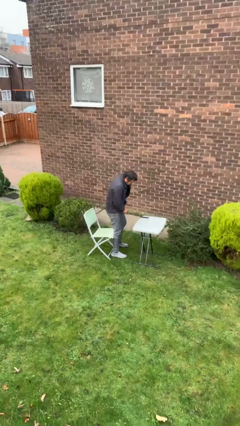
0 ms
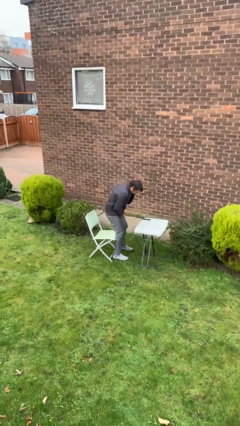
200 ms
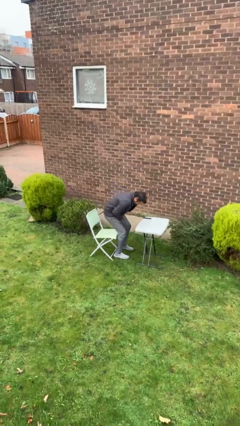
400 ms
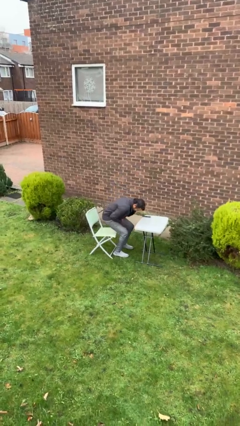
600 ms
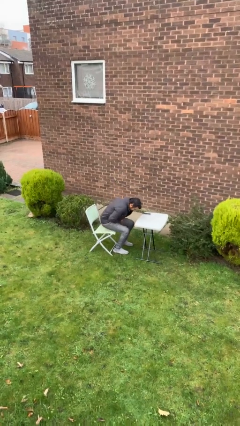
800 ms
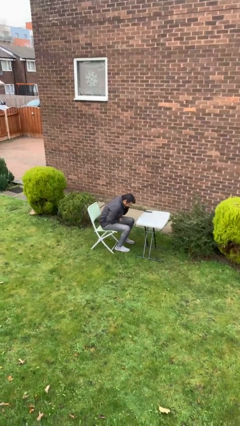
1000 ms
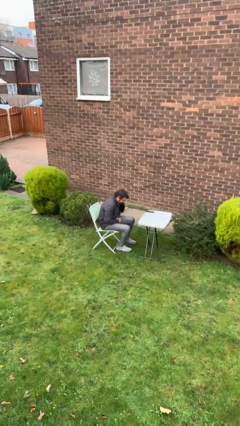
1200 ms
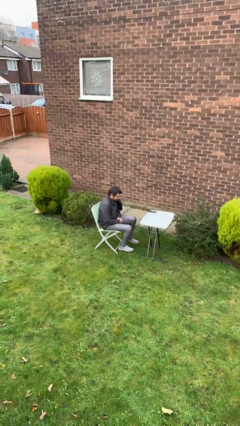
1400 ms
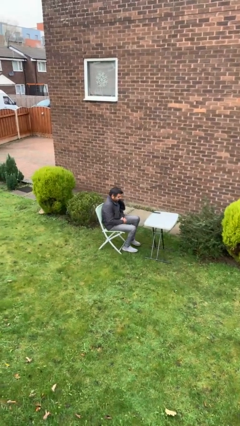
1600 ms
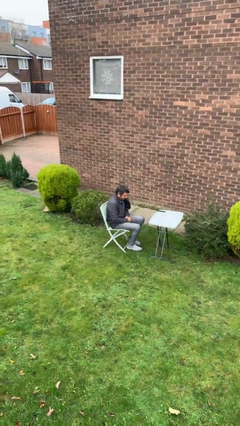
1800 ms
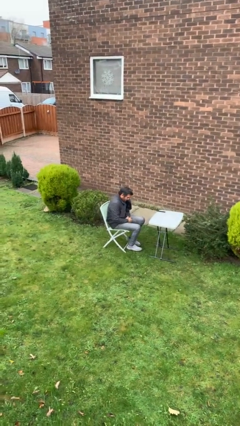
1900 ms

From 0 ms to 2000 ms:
person sits down

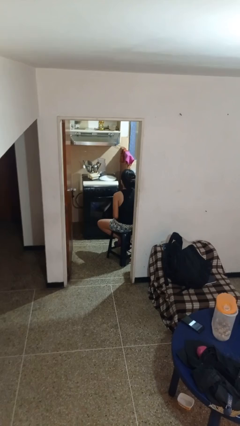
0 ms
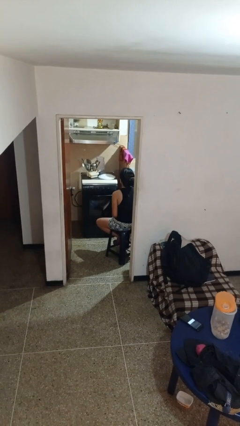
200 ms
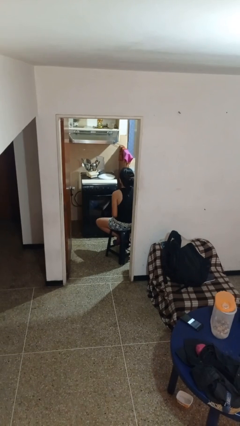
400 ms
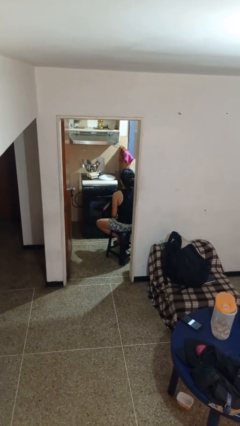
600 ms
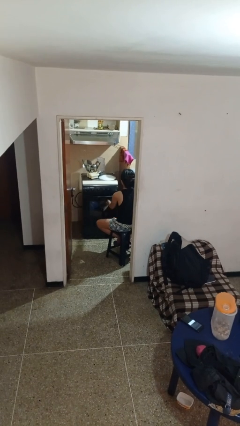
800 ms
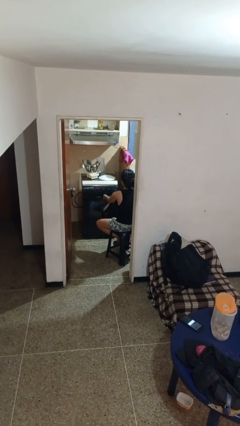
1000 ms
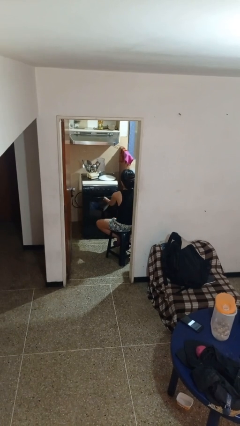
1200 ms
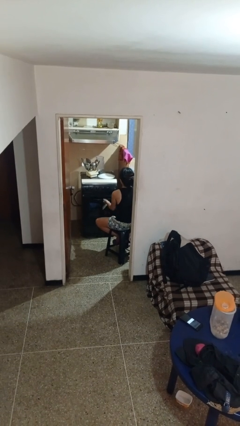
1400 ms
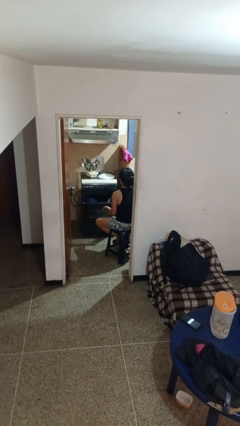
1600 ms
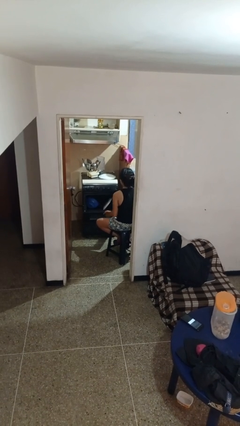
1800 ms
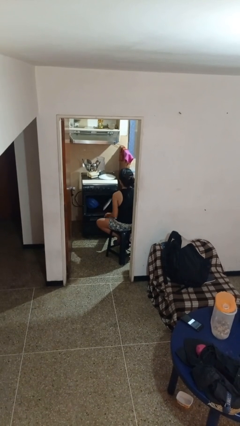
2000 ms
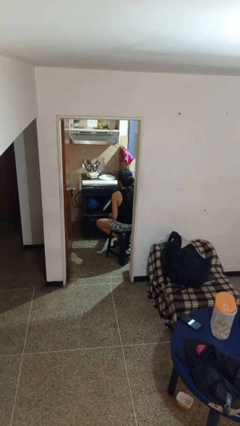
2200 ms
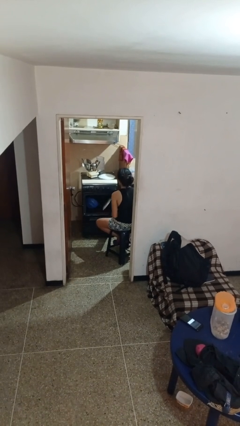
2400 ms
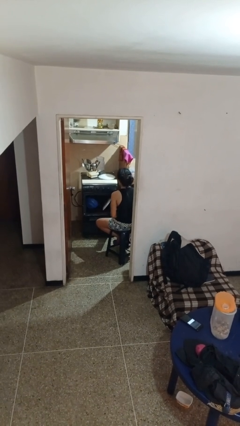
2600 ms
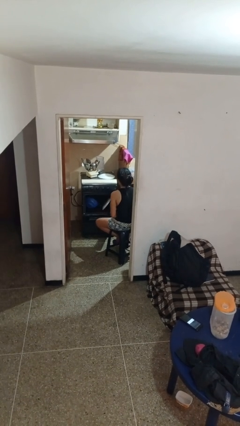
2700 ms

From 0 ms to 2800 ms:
person opens dishwasher

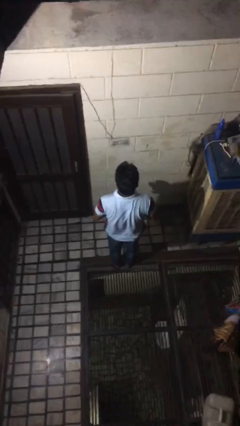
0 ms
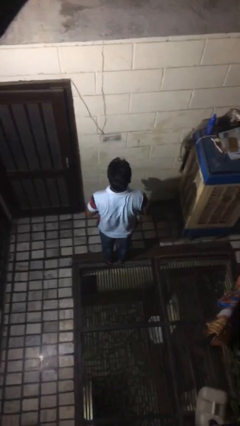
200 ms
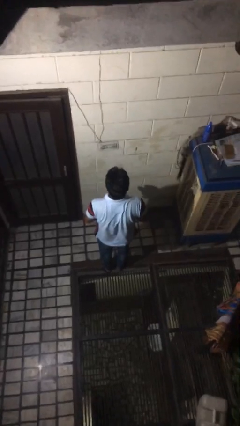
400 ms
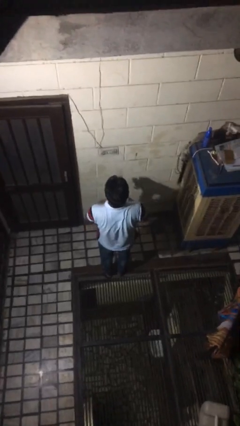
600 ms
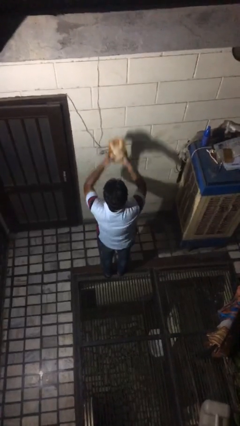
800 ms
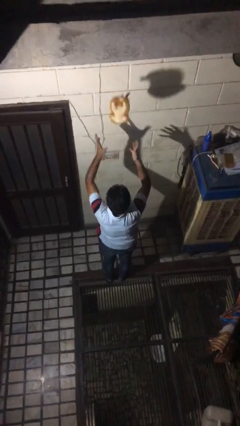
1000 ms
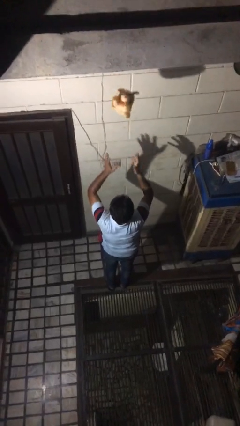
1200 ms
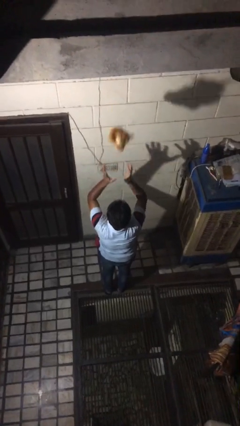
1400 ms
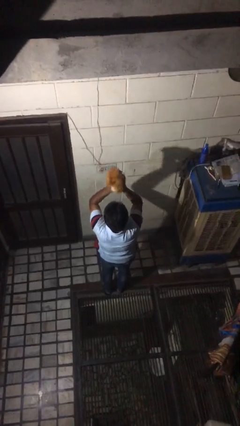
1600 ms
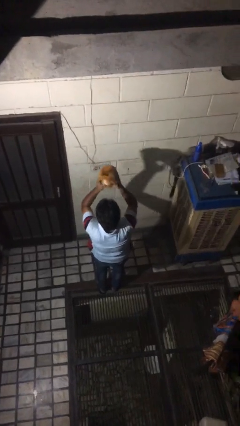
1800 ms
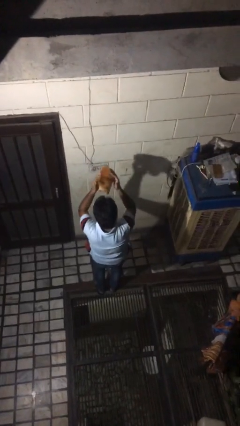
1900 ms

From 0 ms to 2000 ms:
person drops object

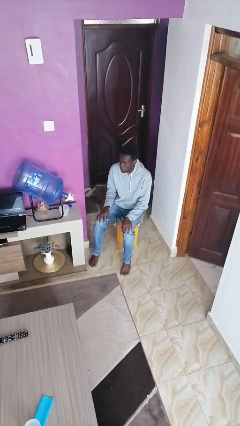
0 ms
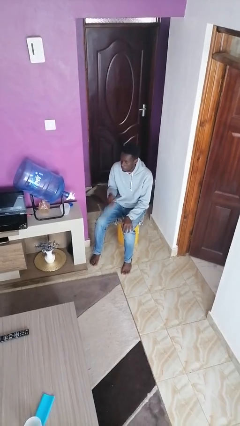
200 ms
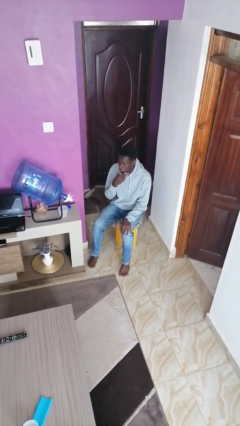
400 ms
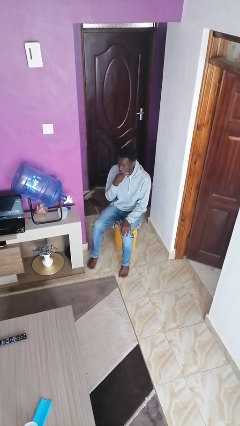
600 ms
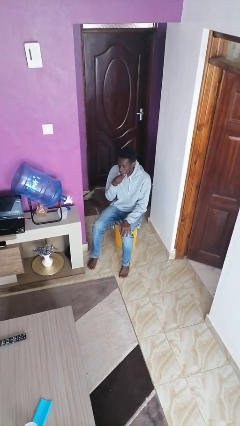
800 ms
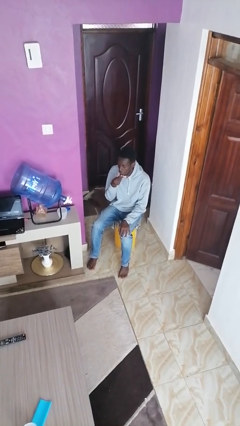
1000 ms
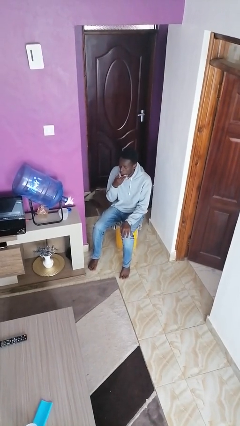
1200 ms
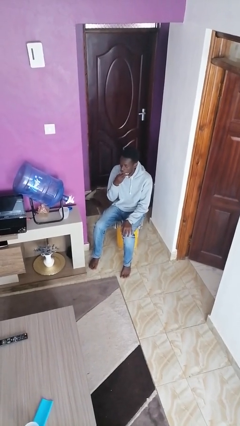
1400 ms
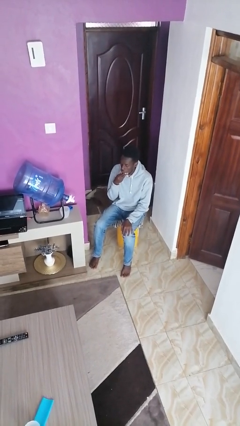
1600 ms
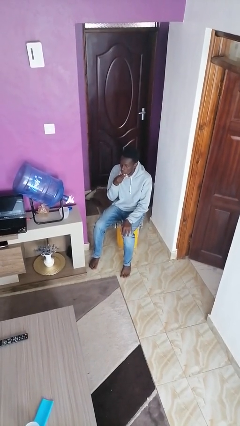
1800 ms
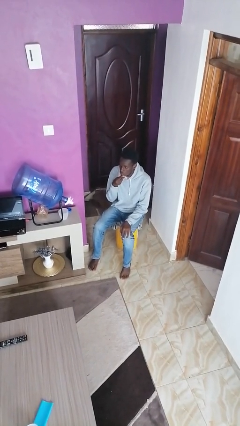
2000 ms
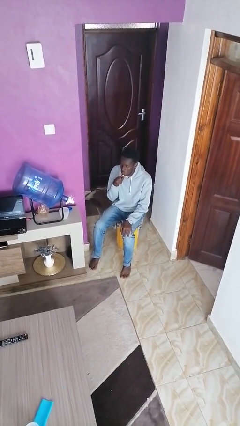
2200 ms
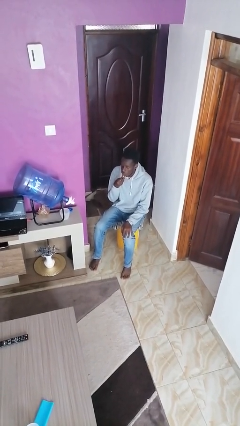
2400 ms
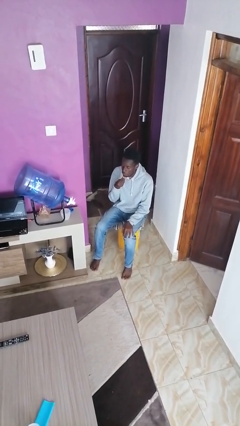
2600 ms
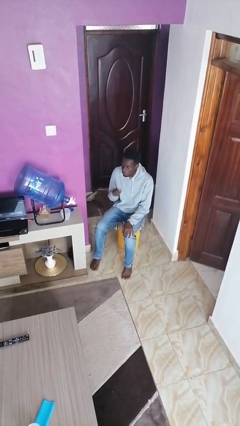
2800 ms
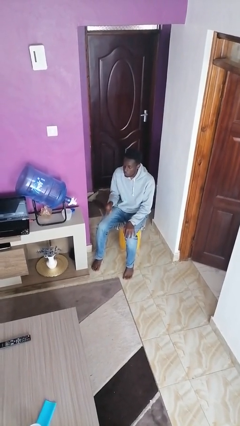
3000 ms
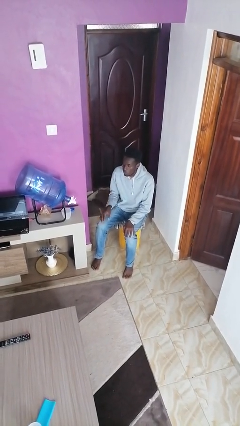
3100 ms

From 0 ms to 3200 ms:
person strokes chin

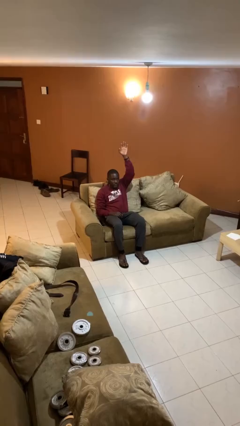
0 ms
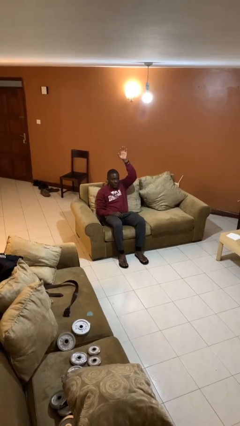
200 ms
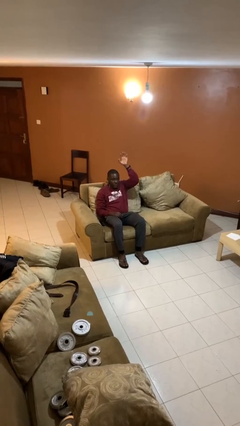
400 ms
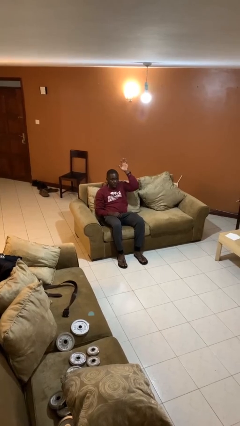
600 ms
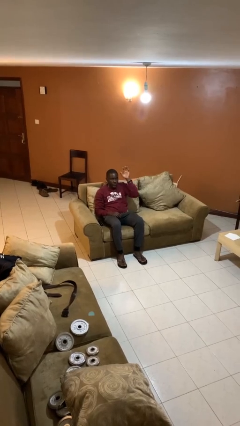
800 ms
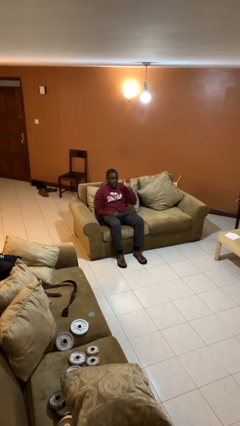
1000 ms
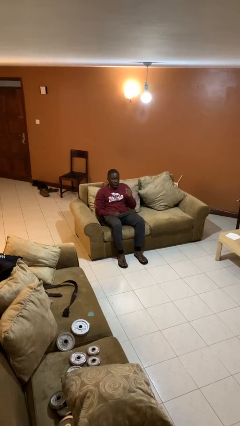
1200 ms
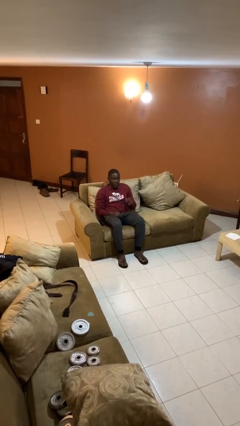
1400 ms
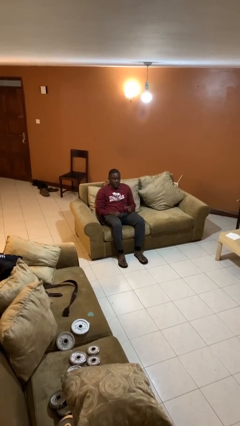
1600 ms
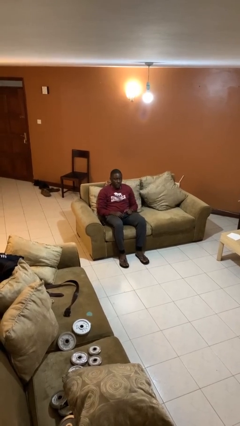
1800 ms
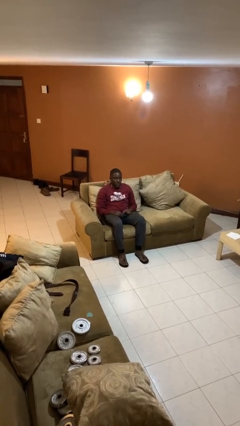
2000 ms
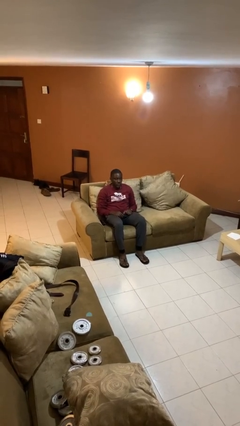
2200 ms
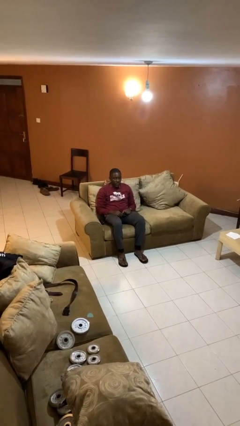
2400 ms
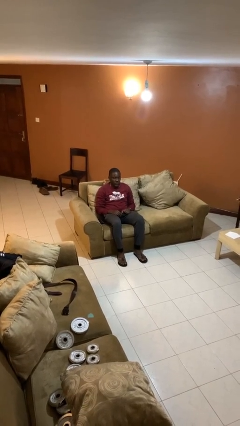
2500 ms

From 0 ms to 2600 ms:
person gestures lower hand

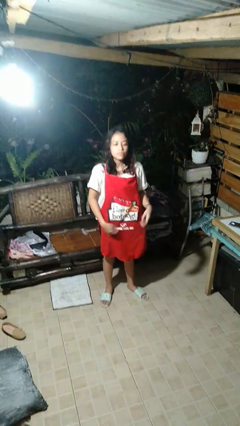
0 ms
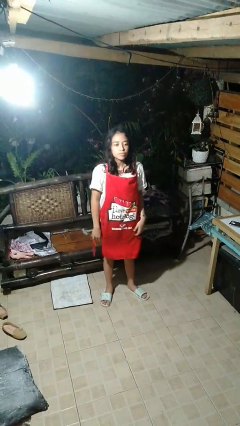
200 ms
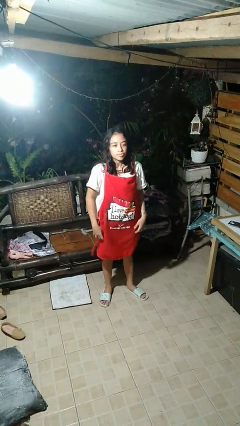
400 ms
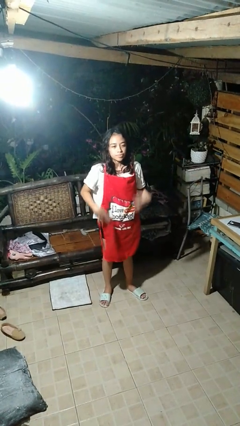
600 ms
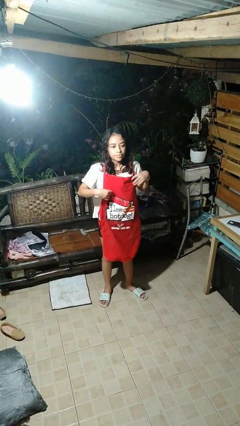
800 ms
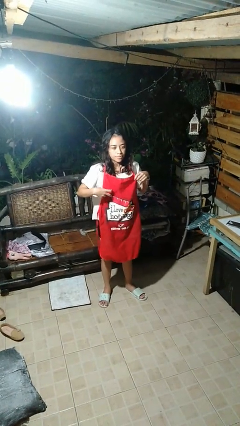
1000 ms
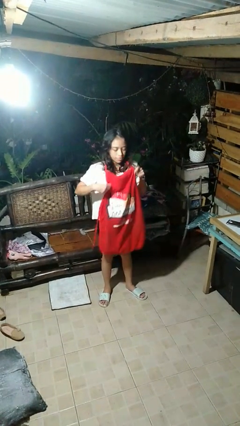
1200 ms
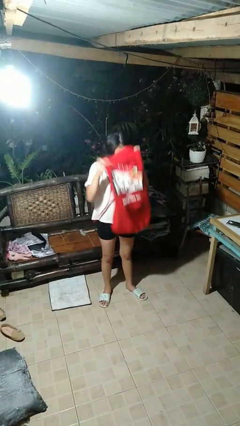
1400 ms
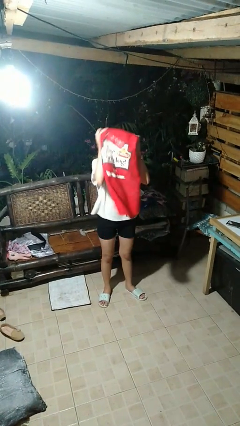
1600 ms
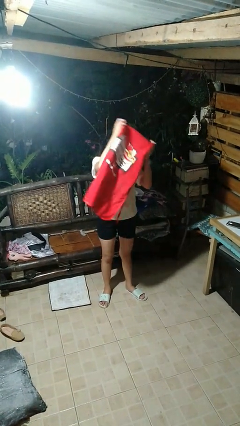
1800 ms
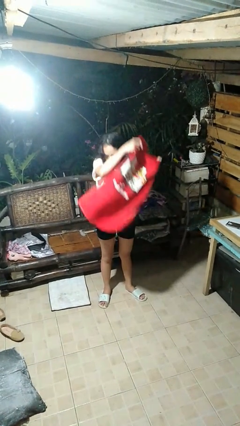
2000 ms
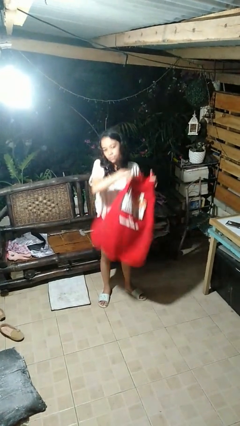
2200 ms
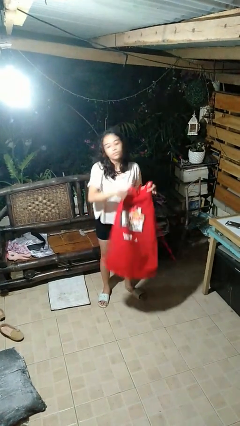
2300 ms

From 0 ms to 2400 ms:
person takes off apron

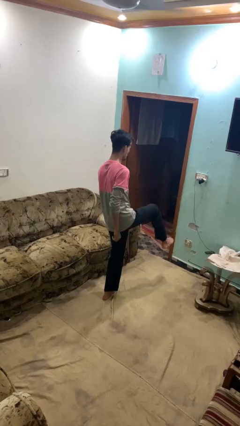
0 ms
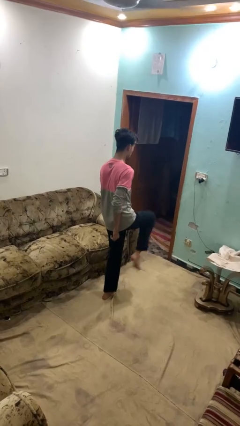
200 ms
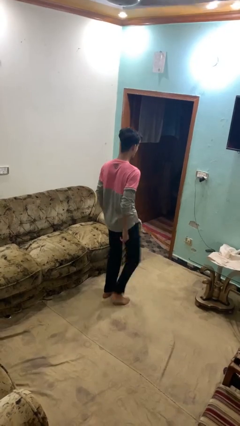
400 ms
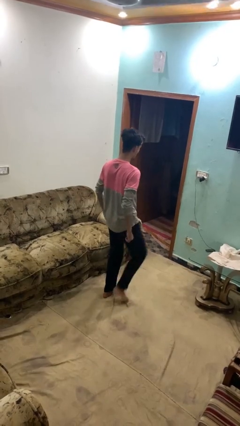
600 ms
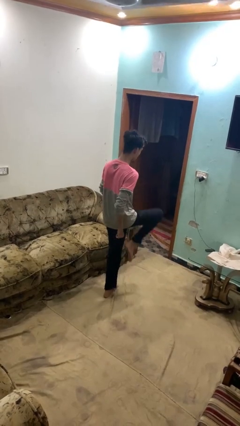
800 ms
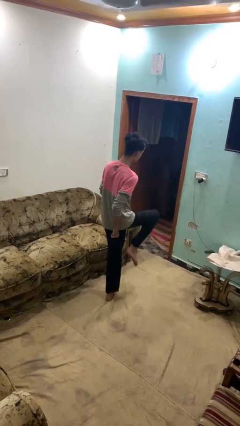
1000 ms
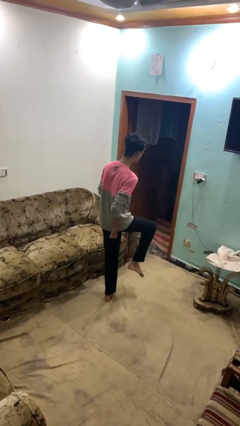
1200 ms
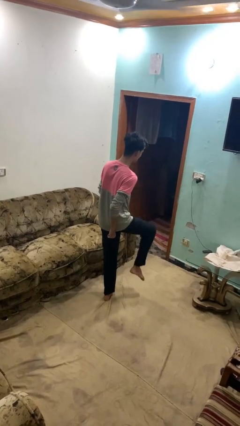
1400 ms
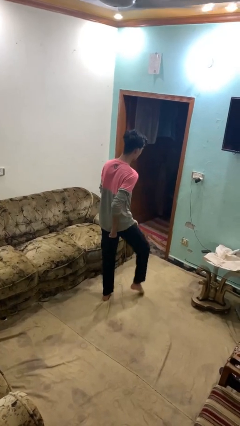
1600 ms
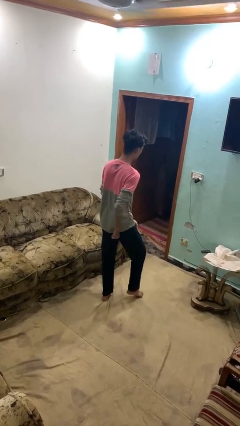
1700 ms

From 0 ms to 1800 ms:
person karate chop

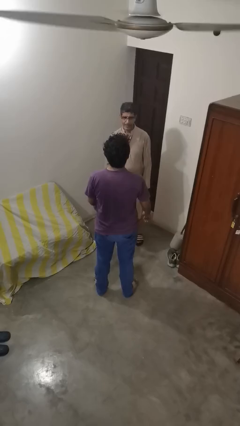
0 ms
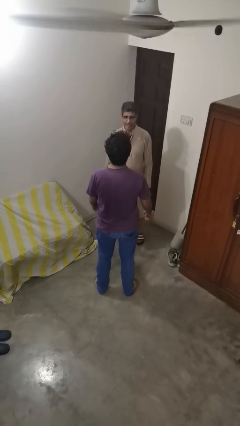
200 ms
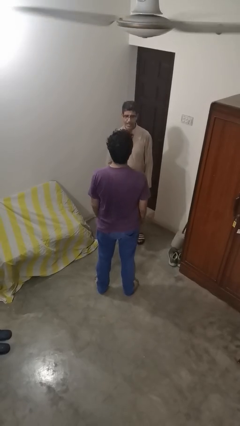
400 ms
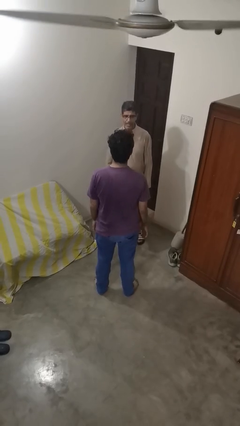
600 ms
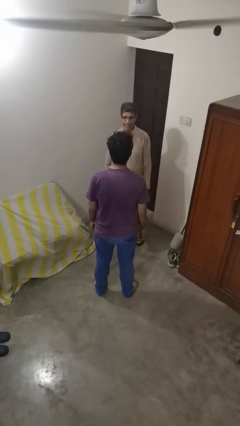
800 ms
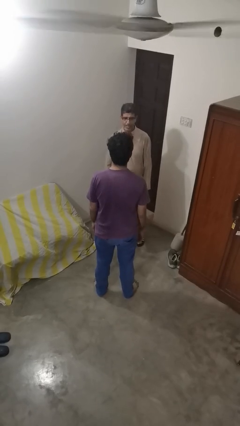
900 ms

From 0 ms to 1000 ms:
person laughs with person
